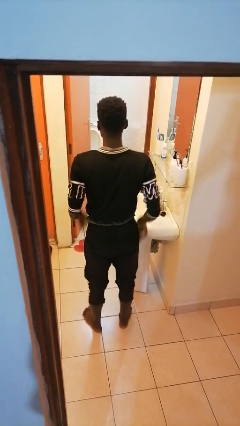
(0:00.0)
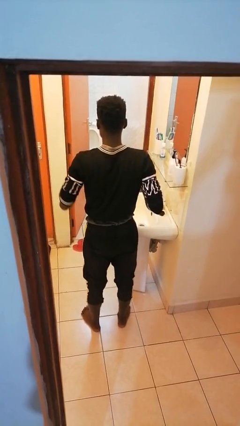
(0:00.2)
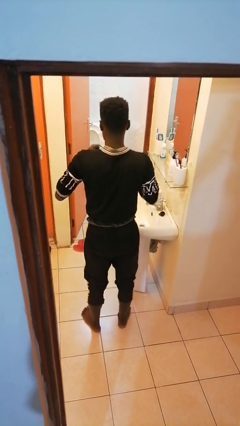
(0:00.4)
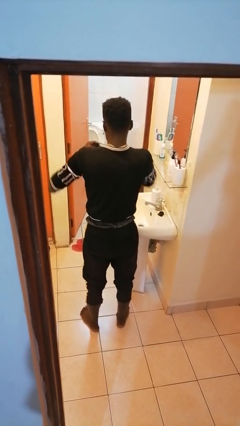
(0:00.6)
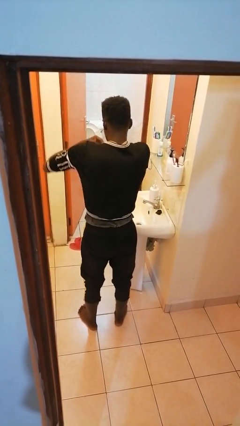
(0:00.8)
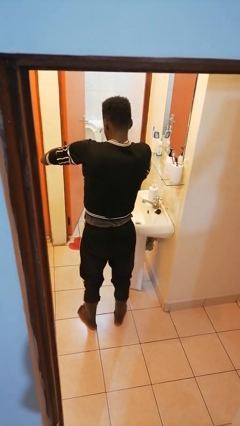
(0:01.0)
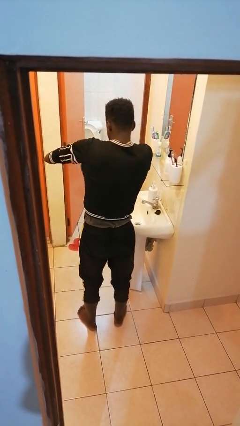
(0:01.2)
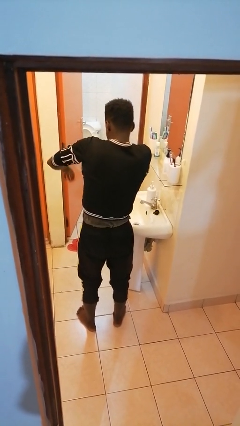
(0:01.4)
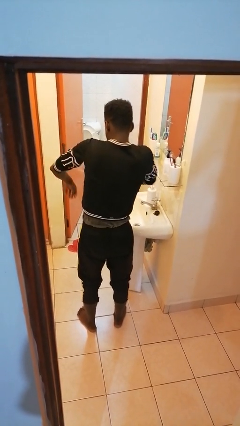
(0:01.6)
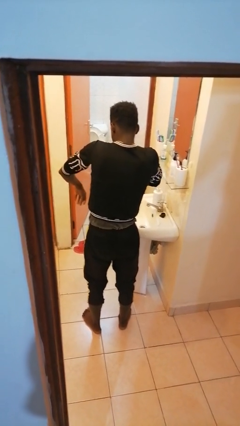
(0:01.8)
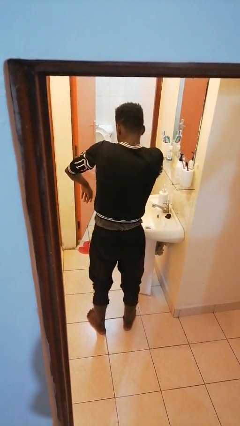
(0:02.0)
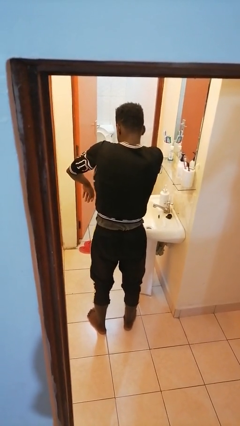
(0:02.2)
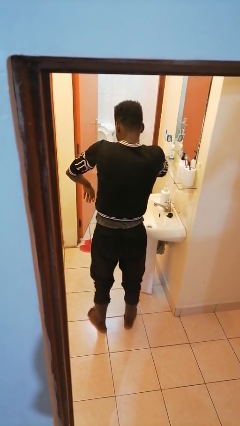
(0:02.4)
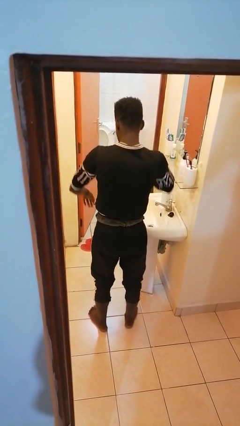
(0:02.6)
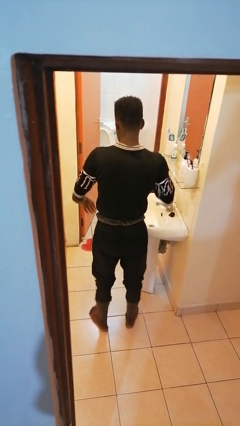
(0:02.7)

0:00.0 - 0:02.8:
person applies deodorant

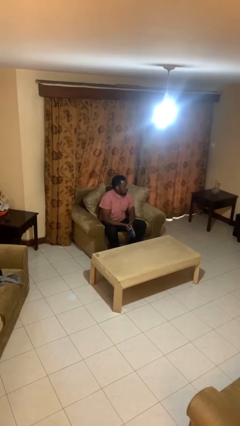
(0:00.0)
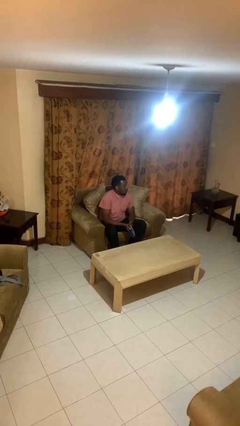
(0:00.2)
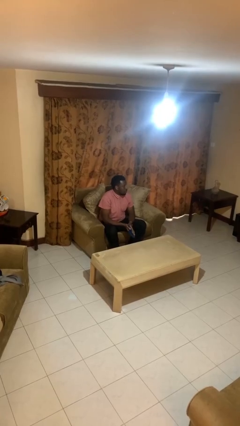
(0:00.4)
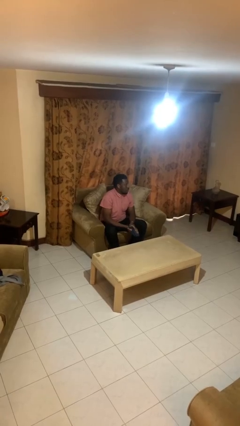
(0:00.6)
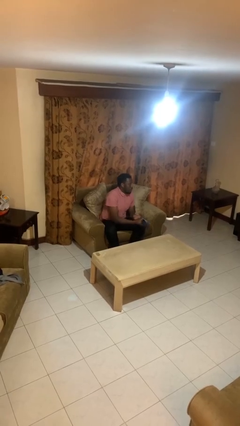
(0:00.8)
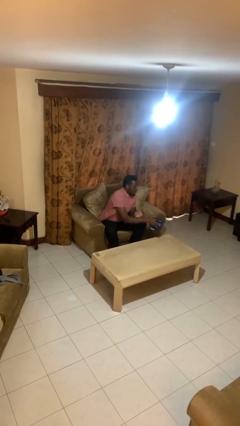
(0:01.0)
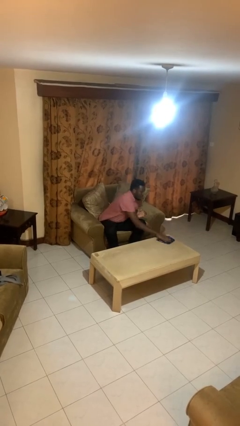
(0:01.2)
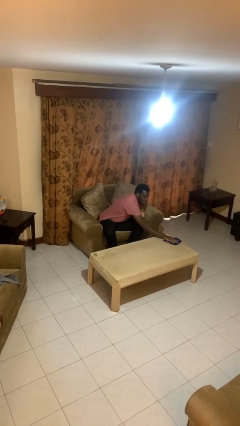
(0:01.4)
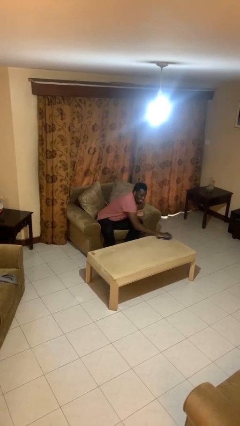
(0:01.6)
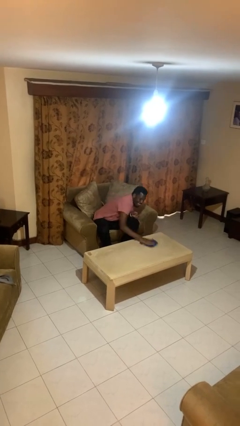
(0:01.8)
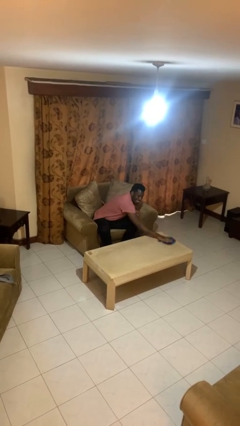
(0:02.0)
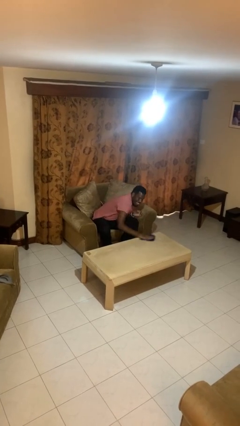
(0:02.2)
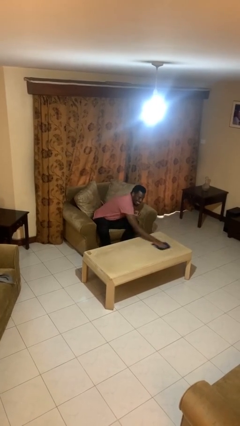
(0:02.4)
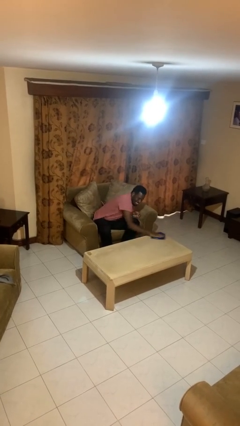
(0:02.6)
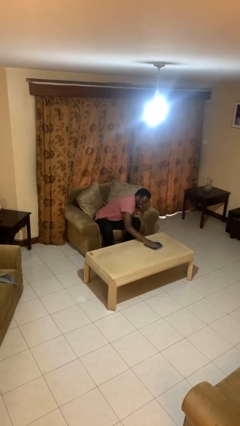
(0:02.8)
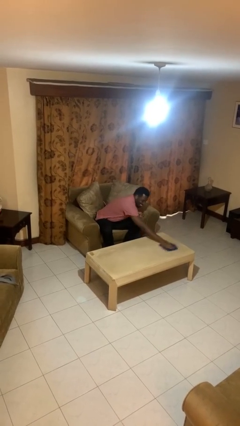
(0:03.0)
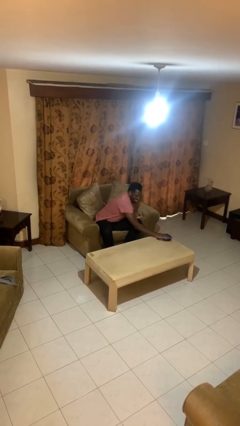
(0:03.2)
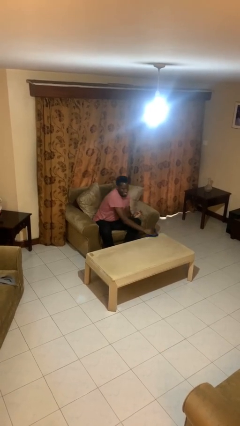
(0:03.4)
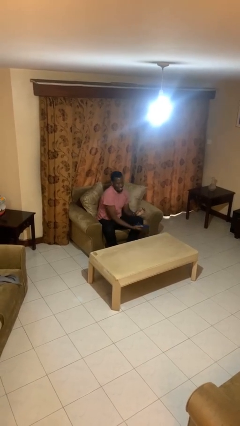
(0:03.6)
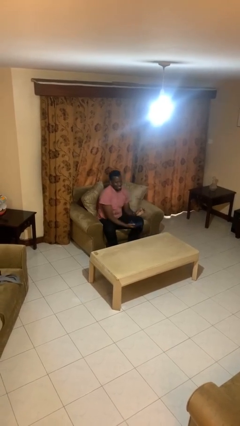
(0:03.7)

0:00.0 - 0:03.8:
person cleans table with rag

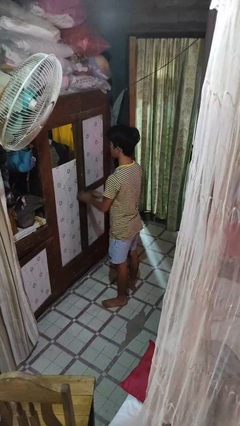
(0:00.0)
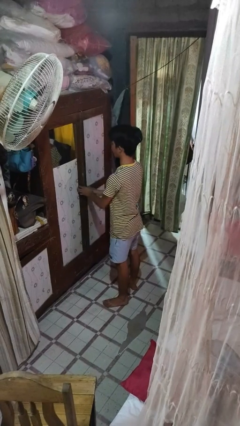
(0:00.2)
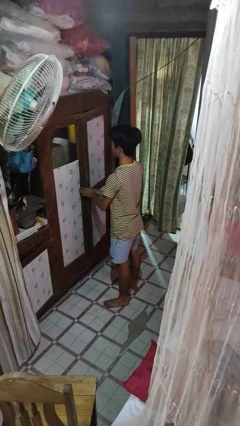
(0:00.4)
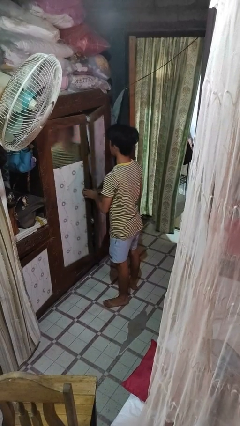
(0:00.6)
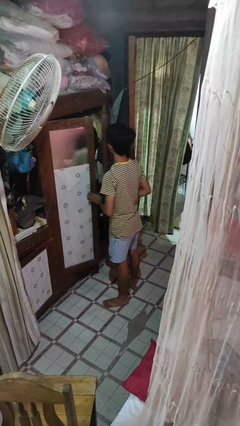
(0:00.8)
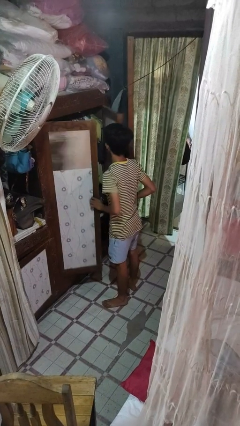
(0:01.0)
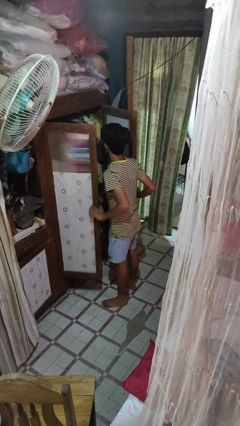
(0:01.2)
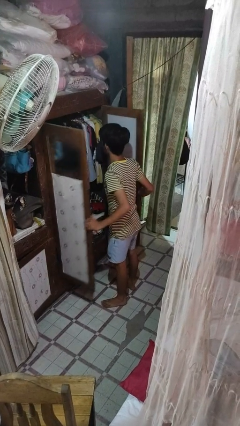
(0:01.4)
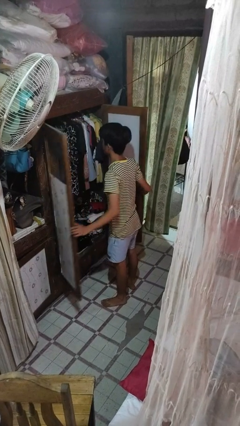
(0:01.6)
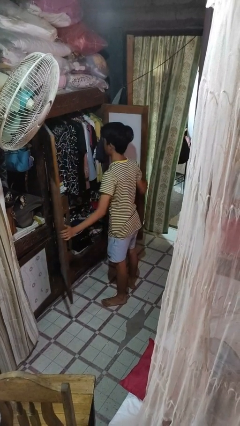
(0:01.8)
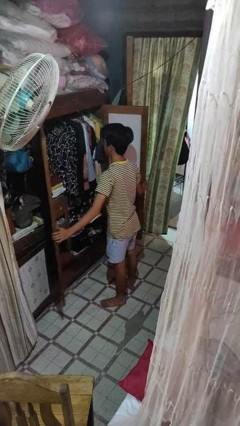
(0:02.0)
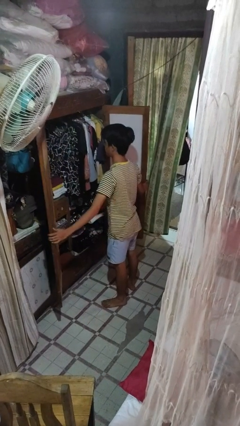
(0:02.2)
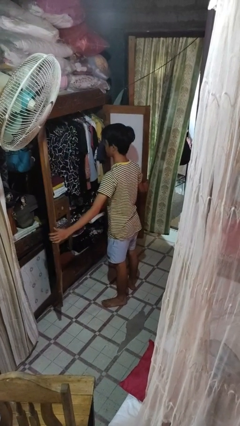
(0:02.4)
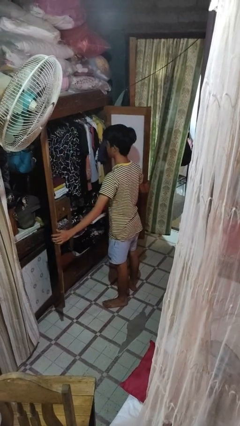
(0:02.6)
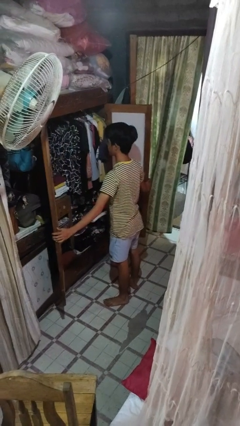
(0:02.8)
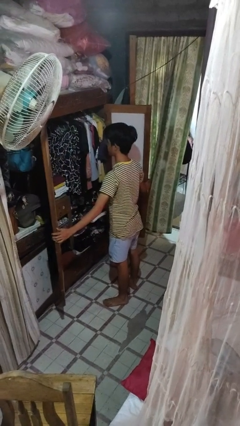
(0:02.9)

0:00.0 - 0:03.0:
person opens closet door

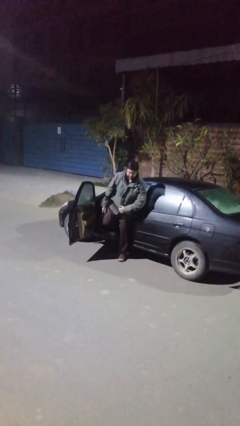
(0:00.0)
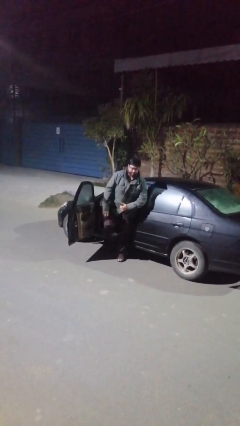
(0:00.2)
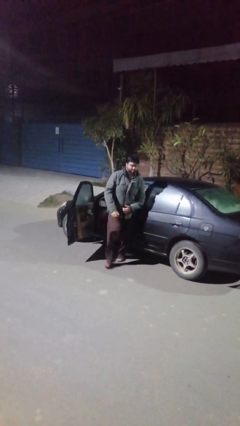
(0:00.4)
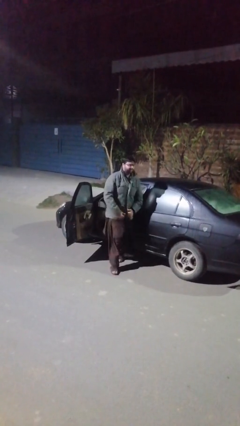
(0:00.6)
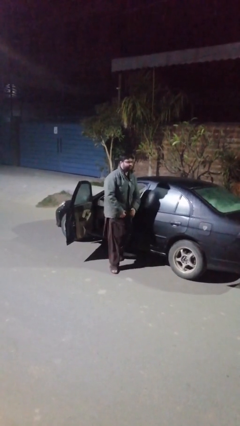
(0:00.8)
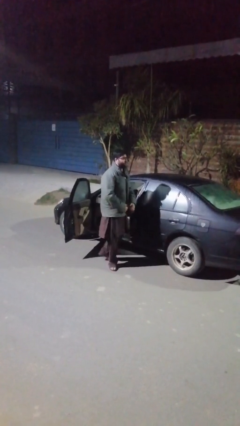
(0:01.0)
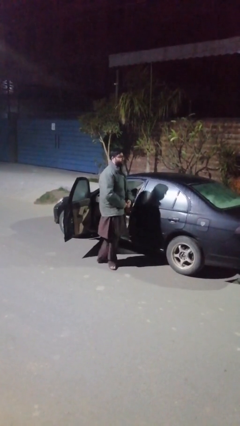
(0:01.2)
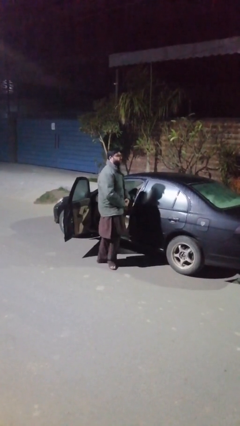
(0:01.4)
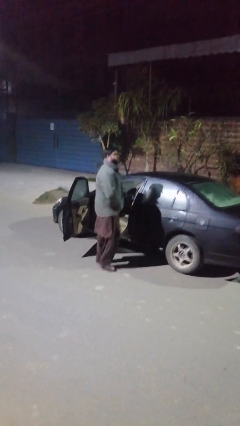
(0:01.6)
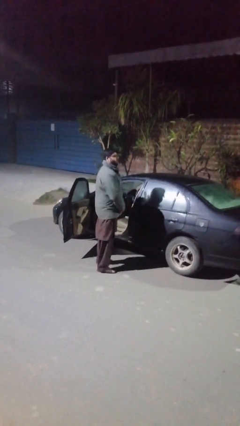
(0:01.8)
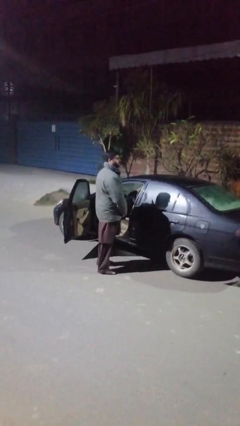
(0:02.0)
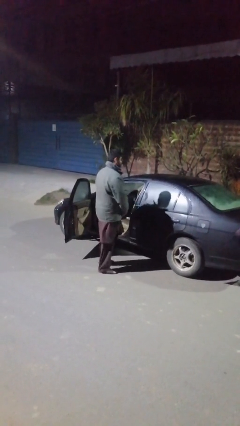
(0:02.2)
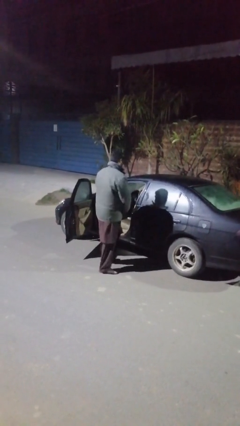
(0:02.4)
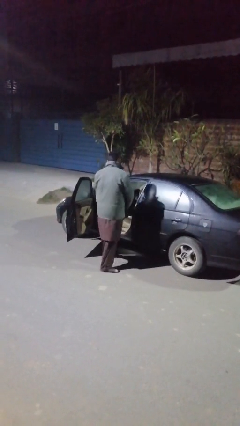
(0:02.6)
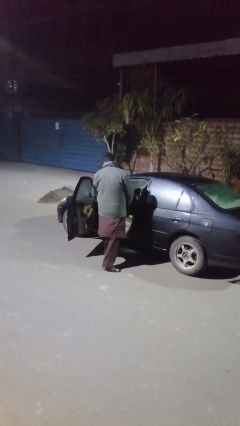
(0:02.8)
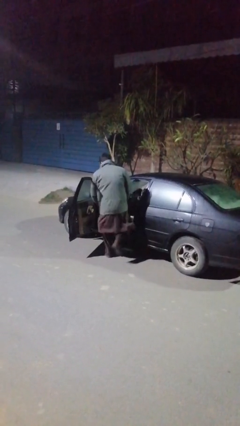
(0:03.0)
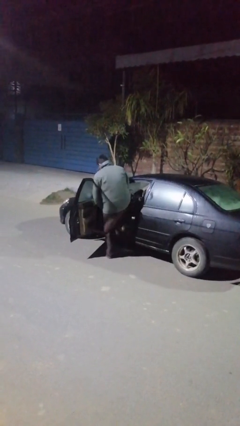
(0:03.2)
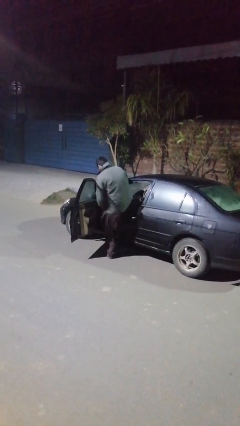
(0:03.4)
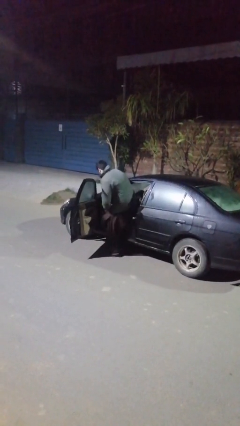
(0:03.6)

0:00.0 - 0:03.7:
person exits car

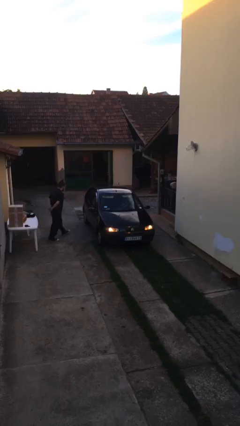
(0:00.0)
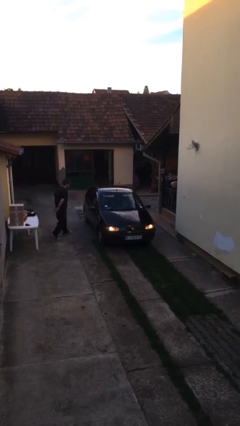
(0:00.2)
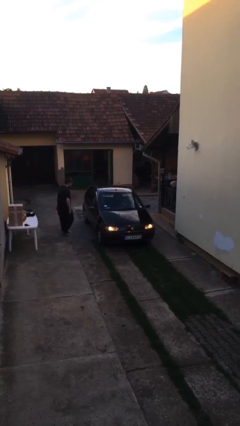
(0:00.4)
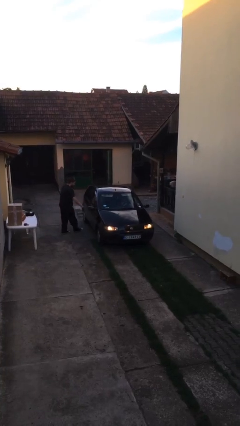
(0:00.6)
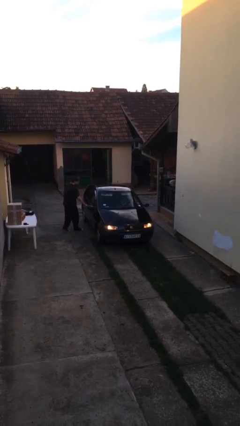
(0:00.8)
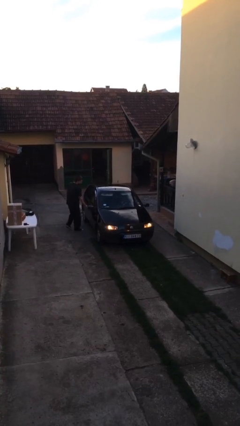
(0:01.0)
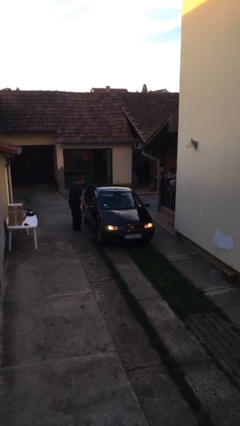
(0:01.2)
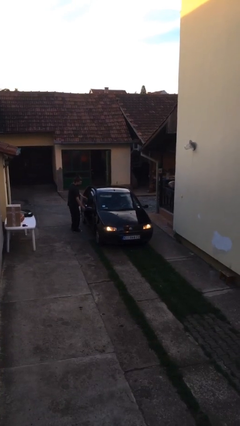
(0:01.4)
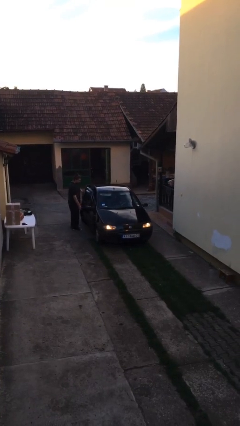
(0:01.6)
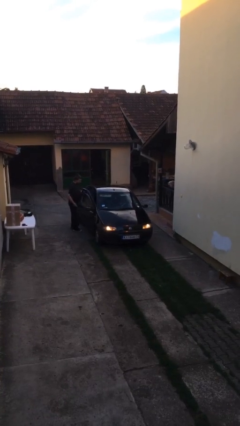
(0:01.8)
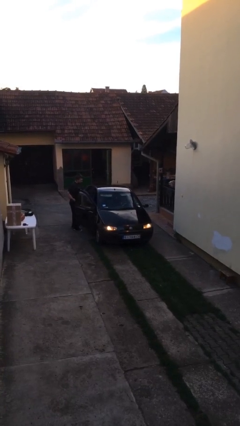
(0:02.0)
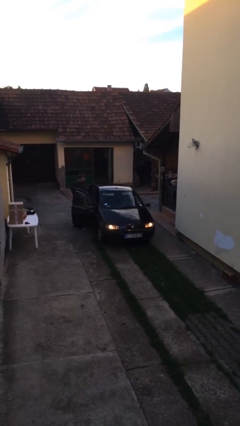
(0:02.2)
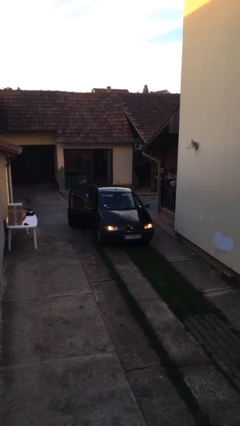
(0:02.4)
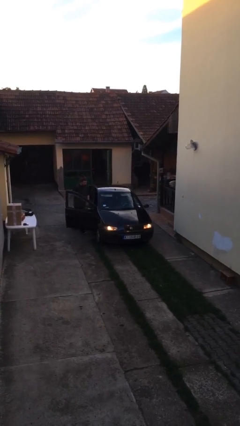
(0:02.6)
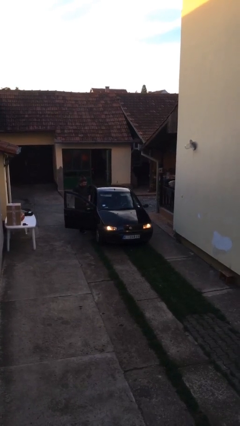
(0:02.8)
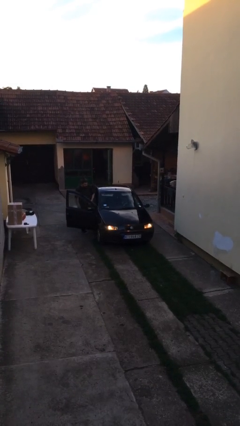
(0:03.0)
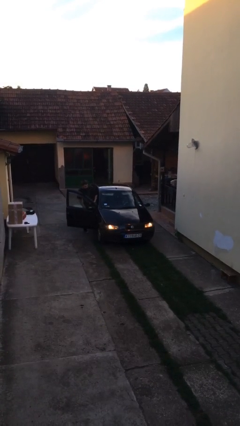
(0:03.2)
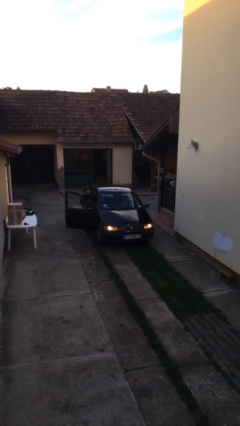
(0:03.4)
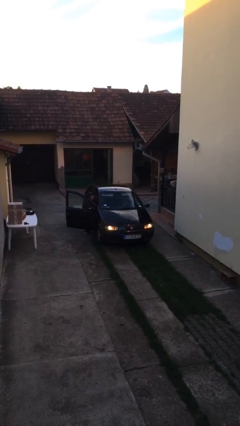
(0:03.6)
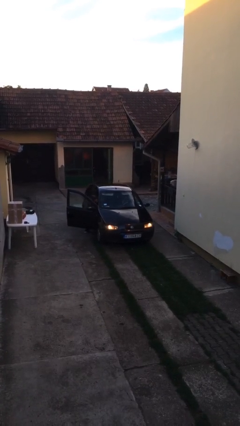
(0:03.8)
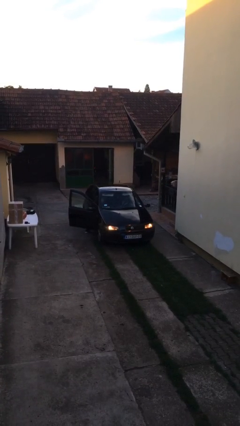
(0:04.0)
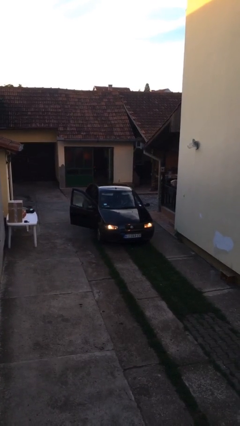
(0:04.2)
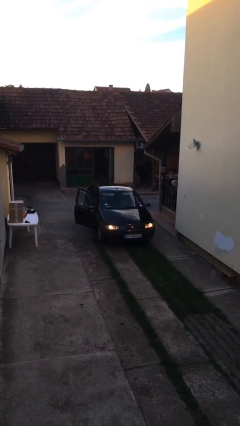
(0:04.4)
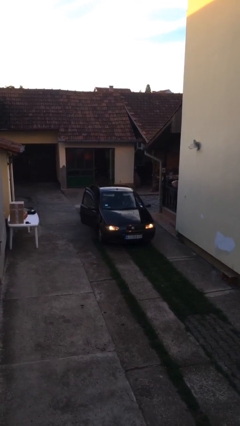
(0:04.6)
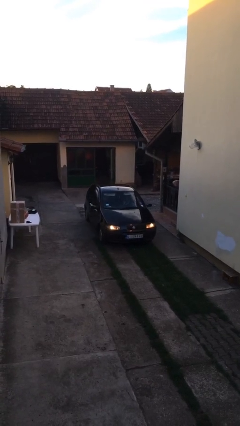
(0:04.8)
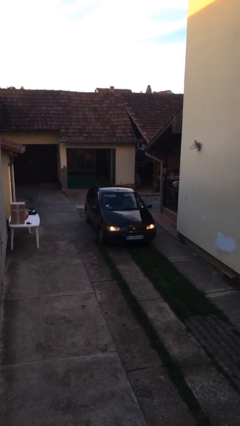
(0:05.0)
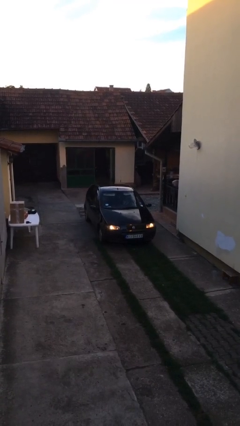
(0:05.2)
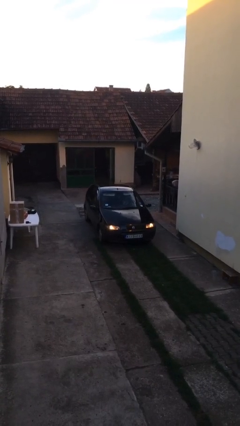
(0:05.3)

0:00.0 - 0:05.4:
car picks up person
